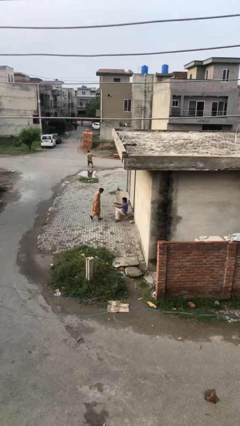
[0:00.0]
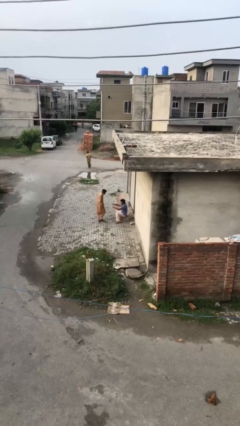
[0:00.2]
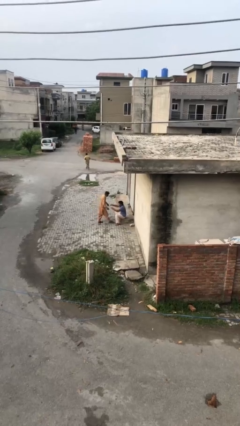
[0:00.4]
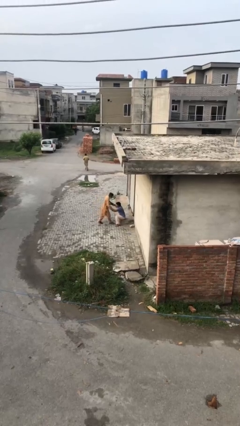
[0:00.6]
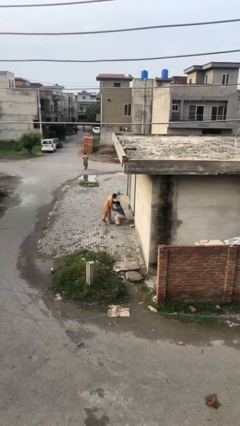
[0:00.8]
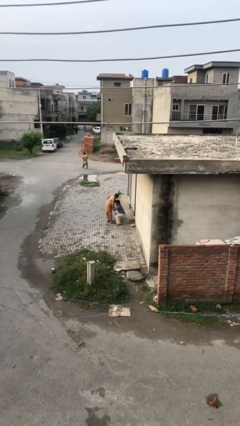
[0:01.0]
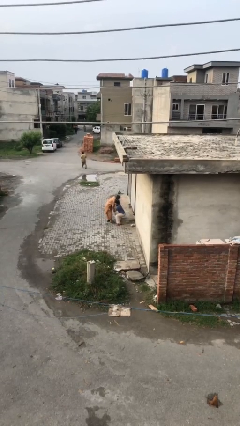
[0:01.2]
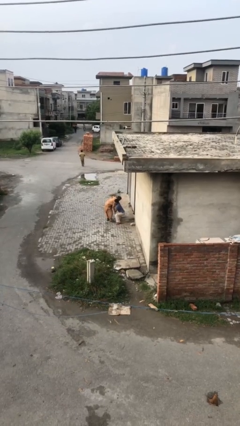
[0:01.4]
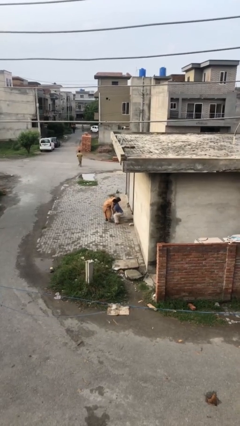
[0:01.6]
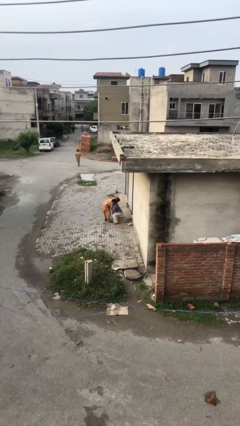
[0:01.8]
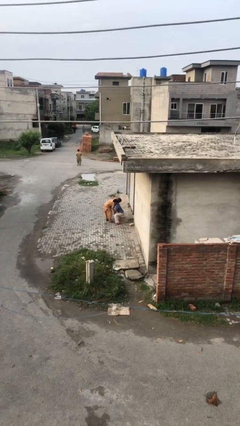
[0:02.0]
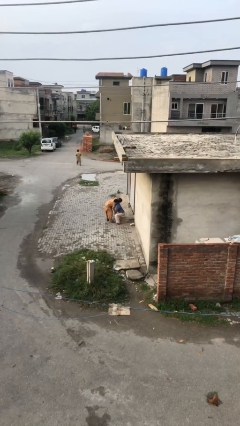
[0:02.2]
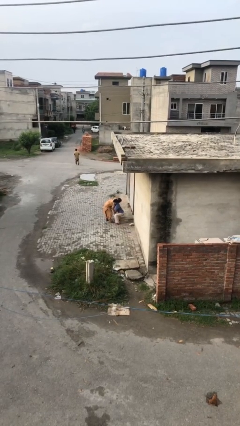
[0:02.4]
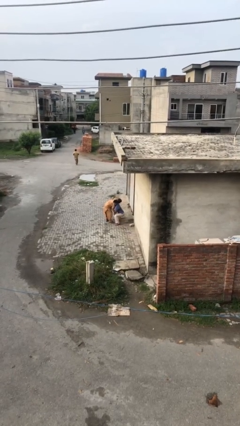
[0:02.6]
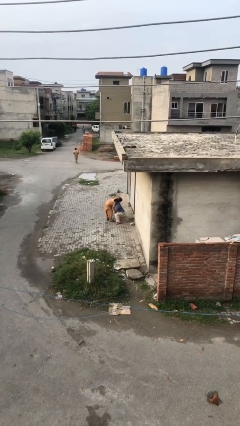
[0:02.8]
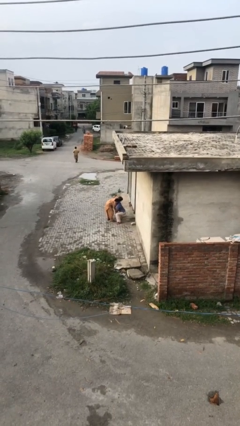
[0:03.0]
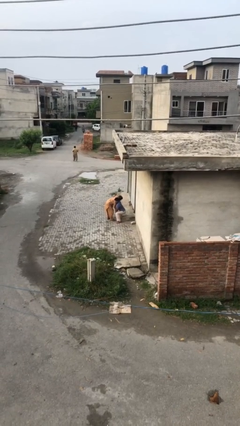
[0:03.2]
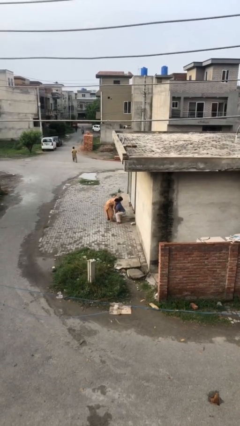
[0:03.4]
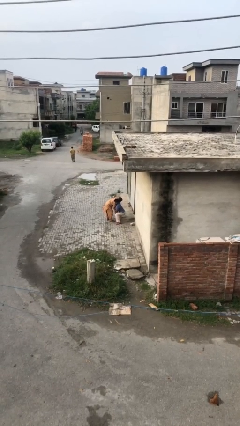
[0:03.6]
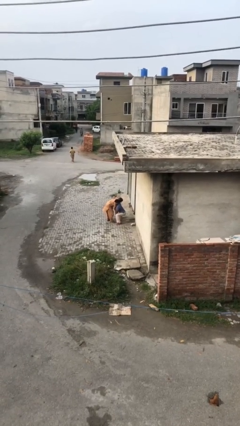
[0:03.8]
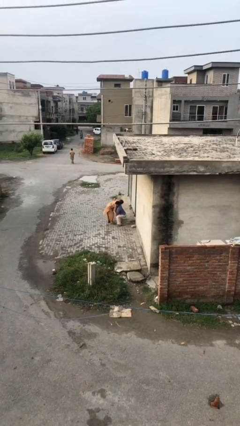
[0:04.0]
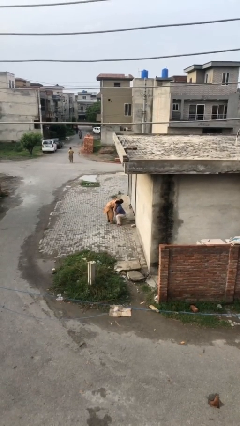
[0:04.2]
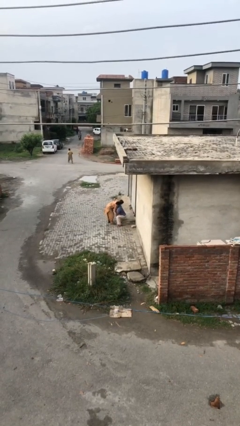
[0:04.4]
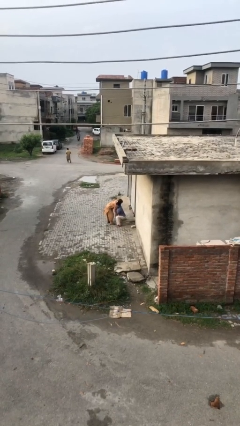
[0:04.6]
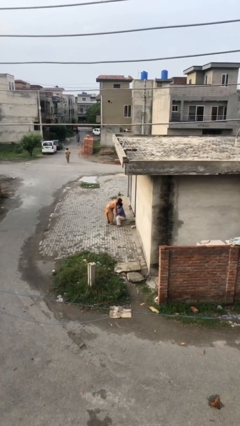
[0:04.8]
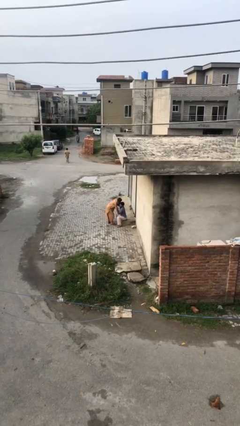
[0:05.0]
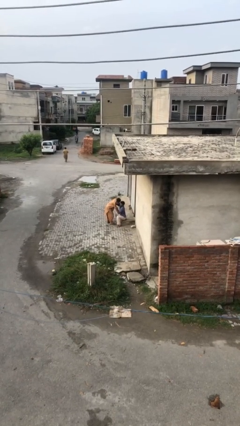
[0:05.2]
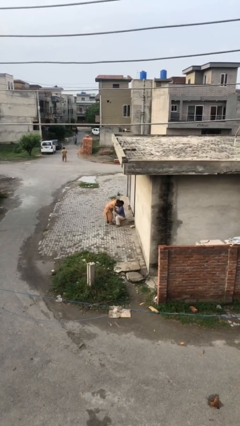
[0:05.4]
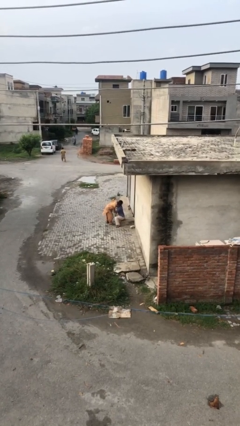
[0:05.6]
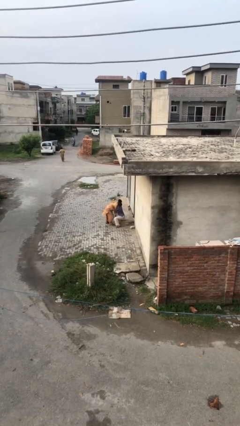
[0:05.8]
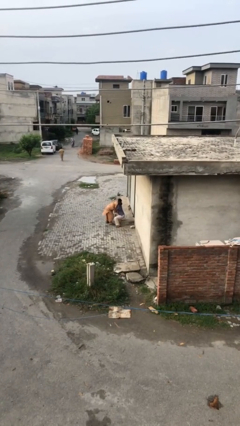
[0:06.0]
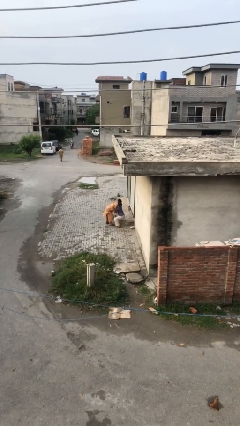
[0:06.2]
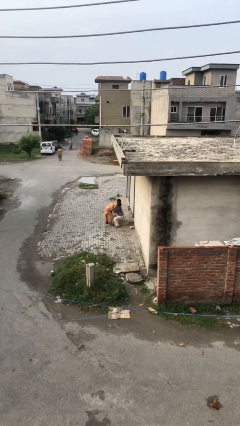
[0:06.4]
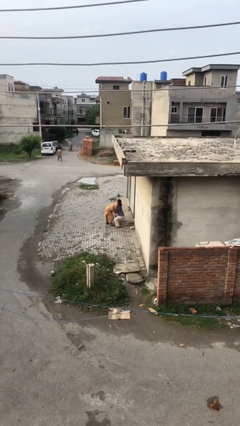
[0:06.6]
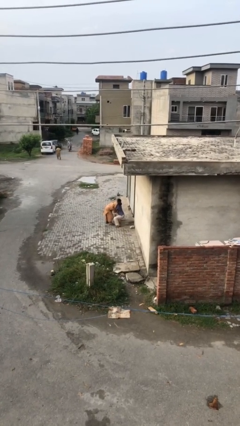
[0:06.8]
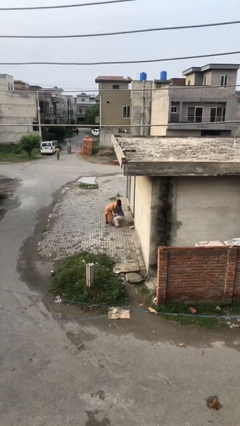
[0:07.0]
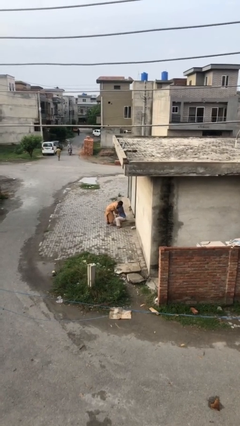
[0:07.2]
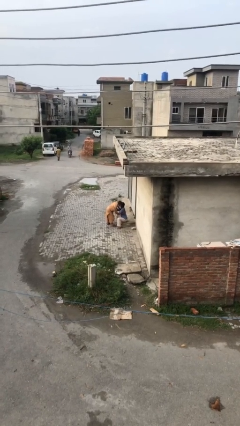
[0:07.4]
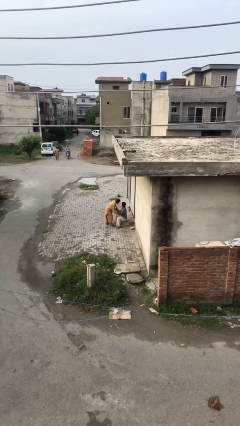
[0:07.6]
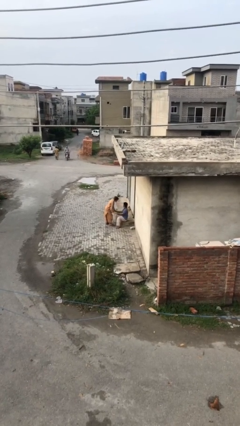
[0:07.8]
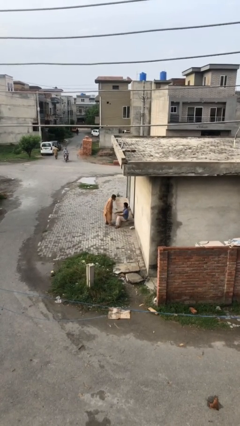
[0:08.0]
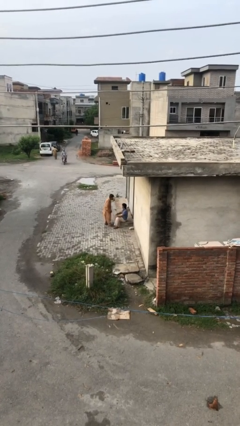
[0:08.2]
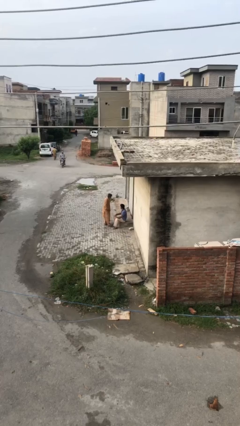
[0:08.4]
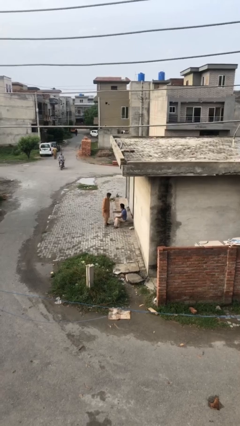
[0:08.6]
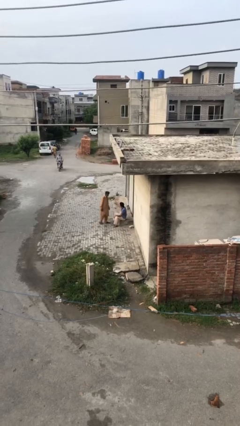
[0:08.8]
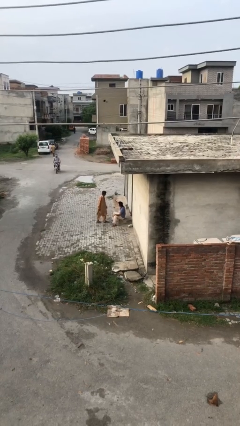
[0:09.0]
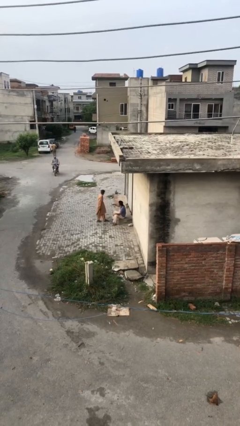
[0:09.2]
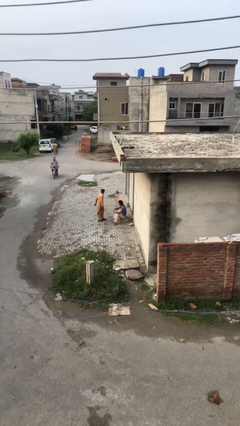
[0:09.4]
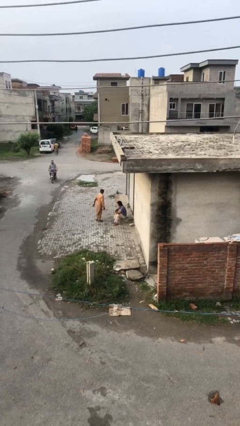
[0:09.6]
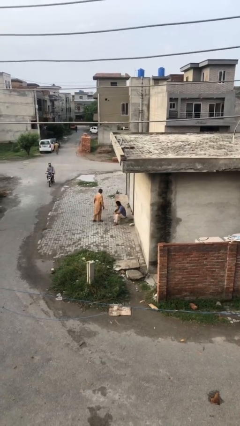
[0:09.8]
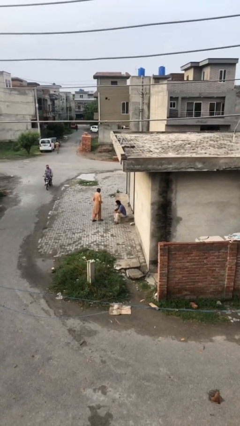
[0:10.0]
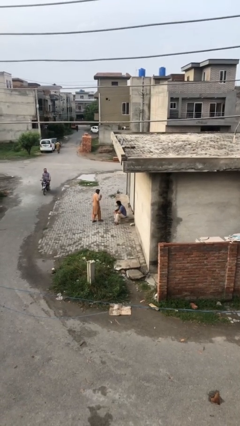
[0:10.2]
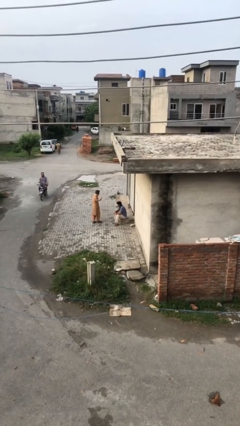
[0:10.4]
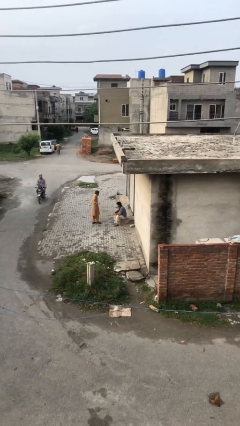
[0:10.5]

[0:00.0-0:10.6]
person embraces person

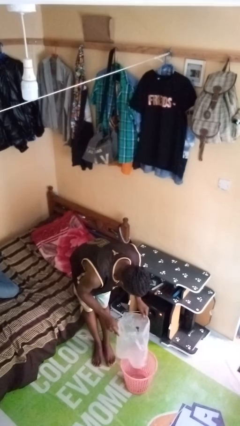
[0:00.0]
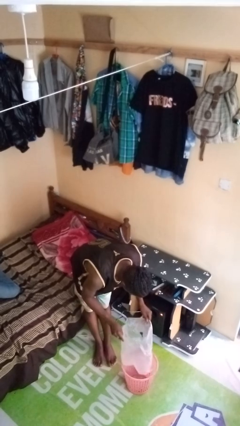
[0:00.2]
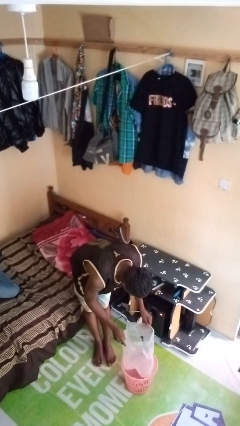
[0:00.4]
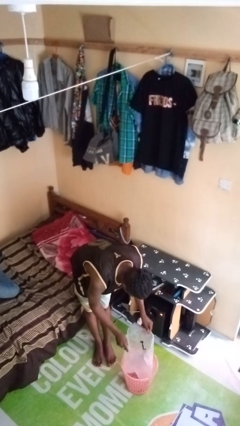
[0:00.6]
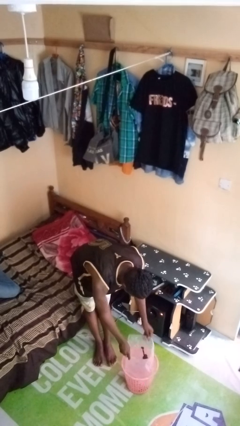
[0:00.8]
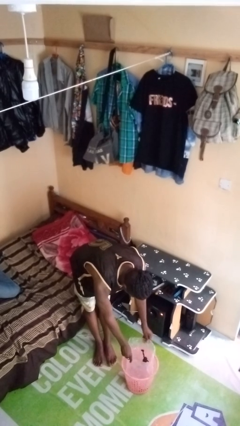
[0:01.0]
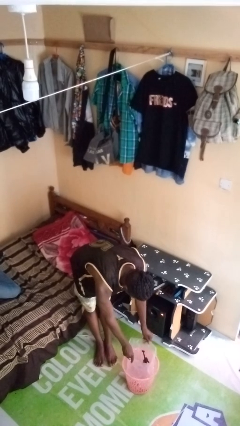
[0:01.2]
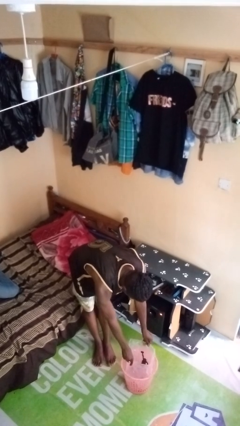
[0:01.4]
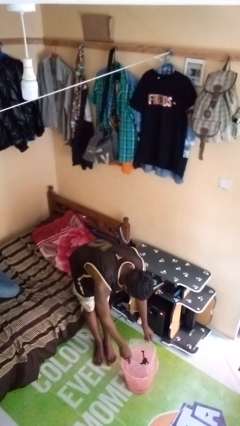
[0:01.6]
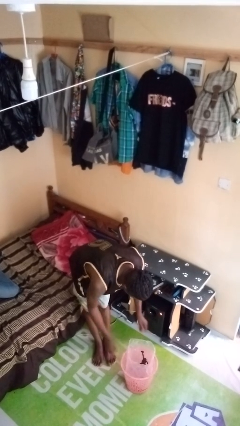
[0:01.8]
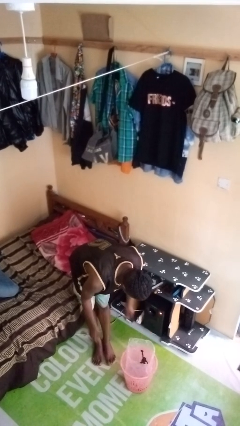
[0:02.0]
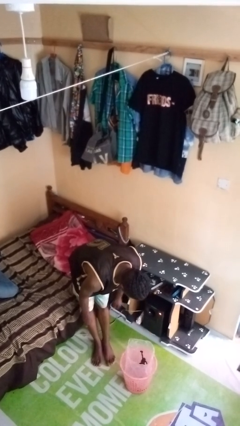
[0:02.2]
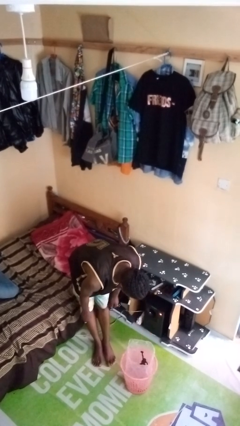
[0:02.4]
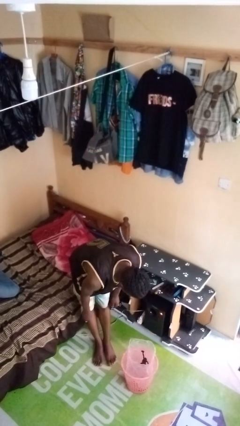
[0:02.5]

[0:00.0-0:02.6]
person inserts trashbag into trashcan

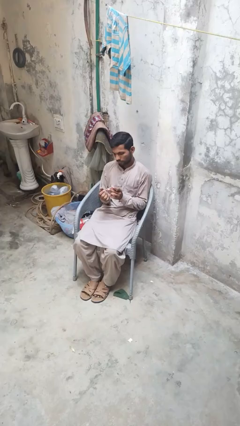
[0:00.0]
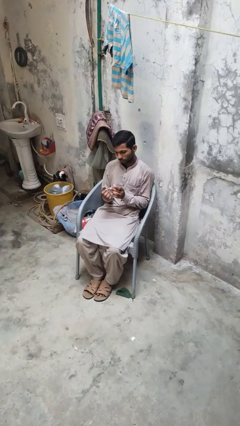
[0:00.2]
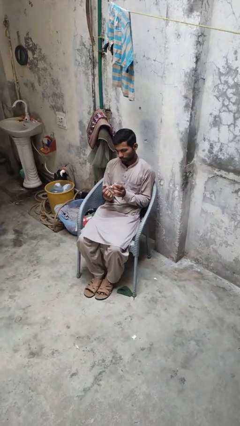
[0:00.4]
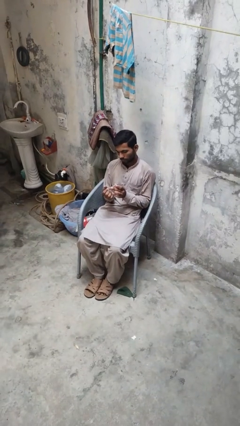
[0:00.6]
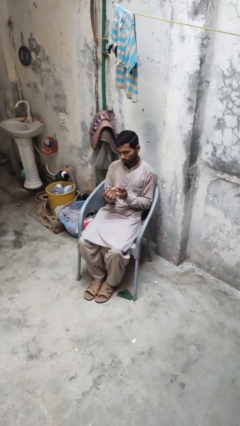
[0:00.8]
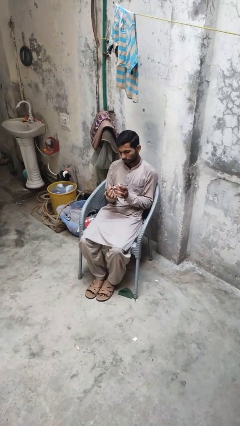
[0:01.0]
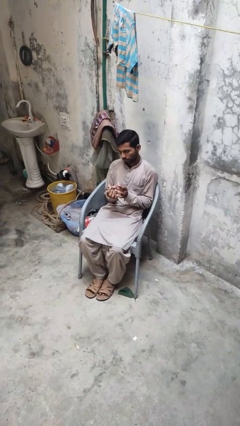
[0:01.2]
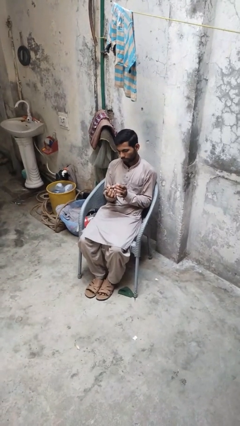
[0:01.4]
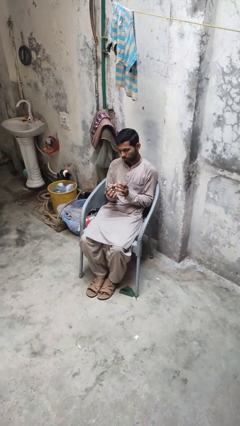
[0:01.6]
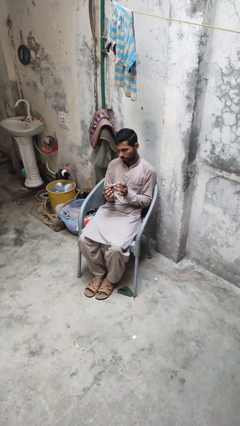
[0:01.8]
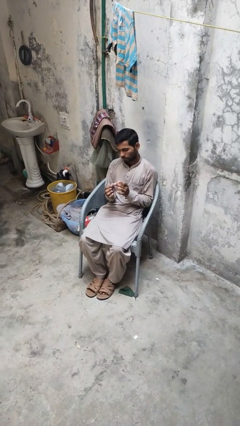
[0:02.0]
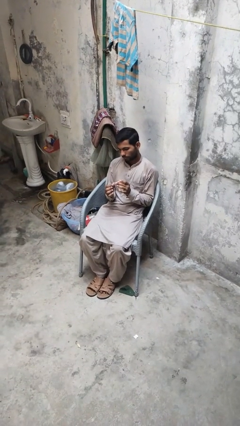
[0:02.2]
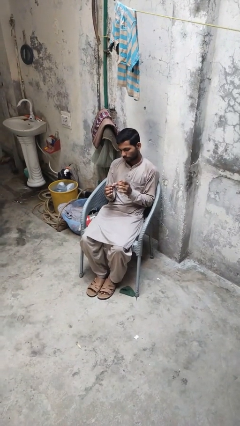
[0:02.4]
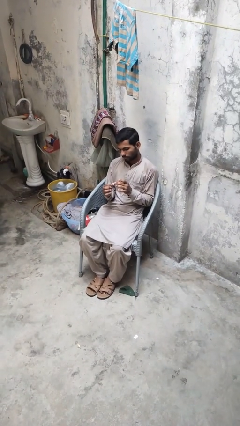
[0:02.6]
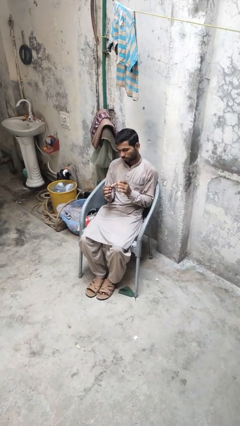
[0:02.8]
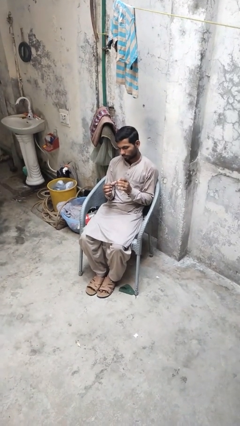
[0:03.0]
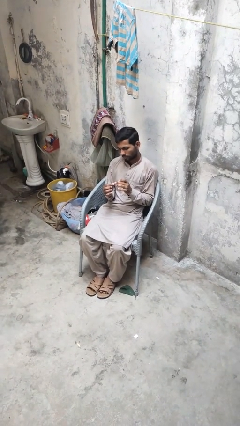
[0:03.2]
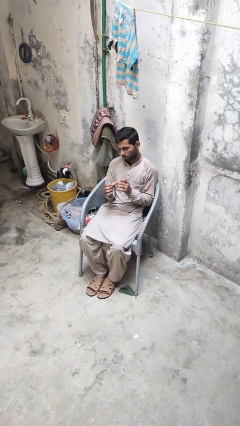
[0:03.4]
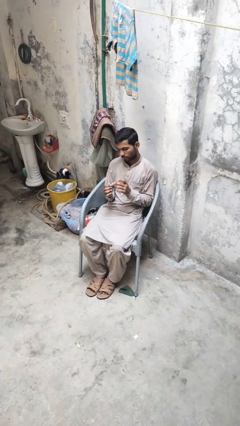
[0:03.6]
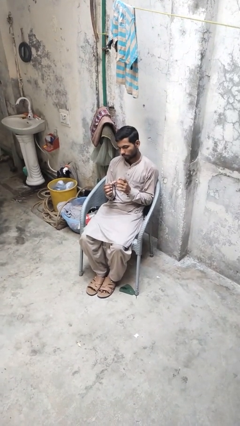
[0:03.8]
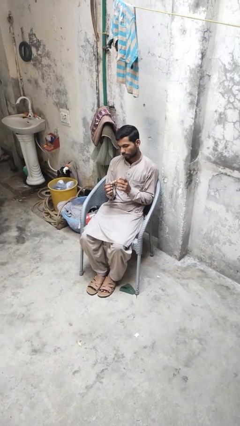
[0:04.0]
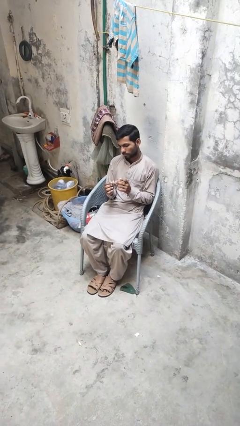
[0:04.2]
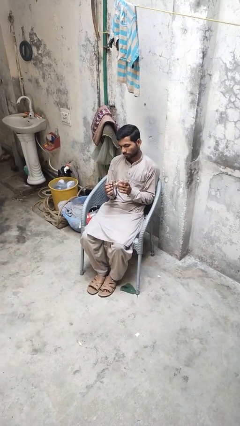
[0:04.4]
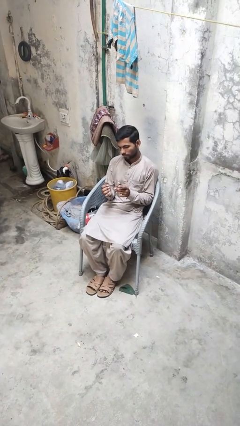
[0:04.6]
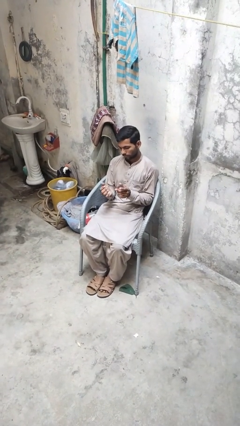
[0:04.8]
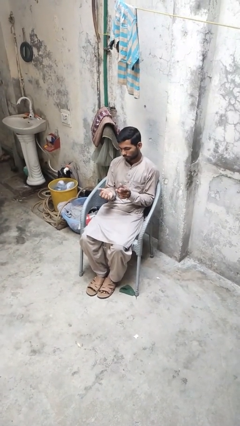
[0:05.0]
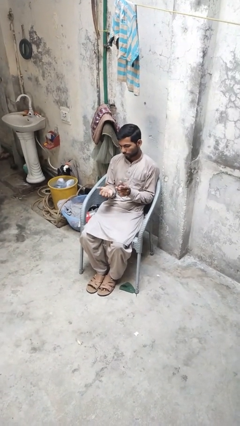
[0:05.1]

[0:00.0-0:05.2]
person clips fingernails
